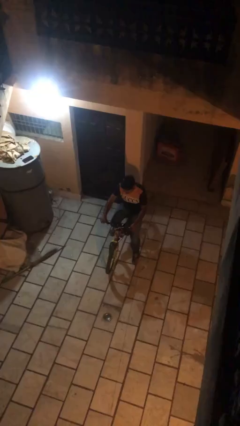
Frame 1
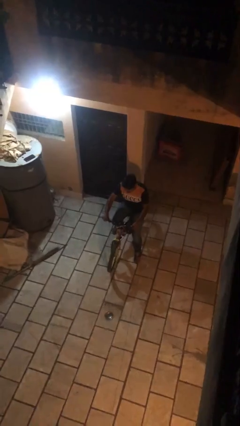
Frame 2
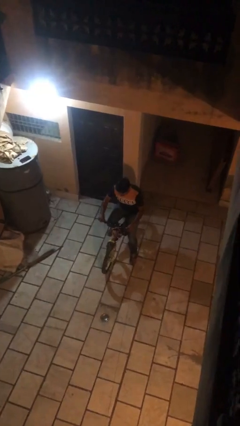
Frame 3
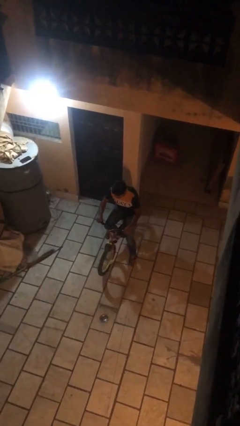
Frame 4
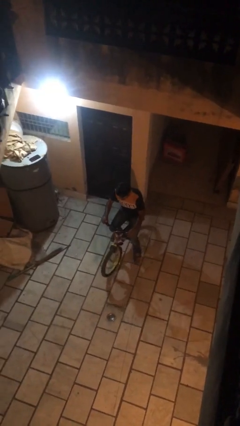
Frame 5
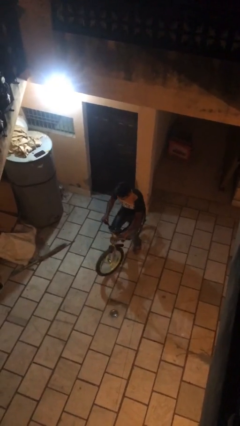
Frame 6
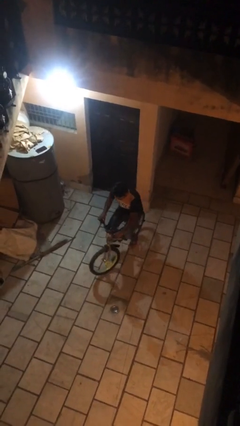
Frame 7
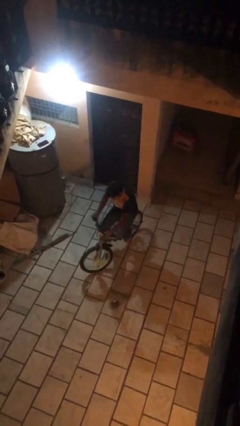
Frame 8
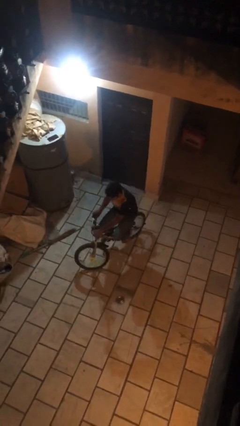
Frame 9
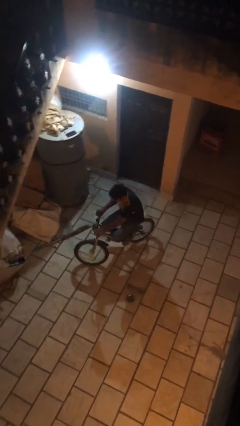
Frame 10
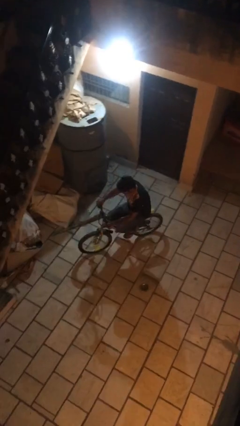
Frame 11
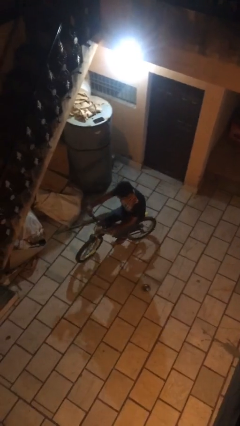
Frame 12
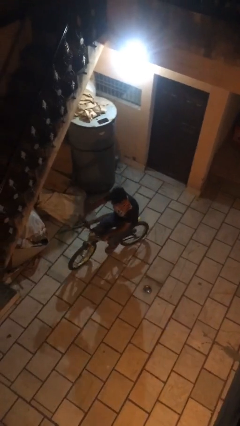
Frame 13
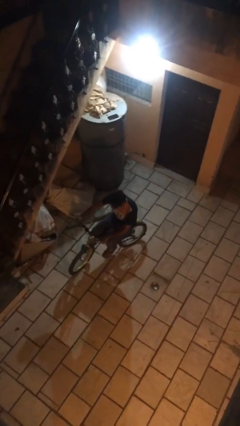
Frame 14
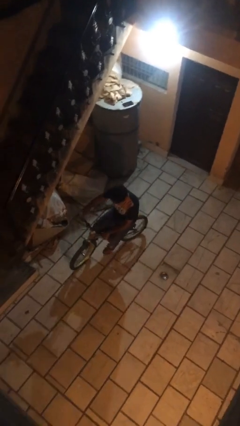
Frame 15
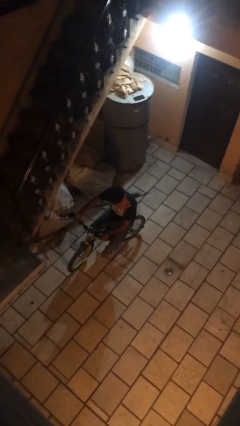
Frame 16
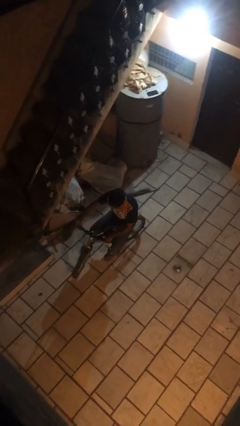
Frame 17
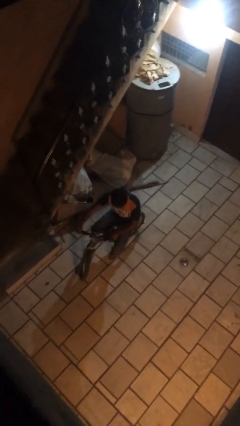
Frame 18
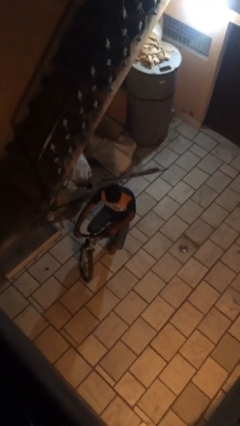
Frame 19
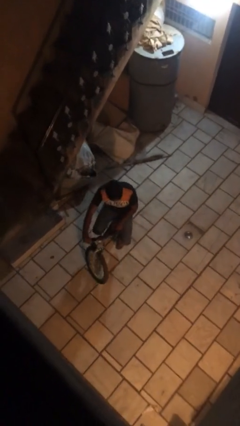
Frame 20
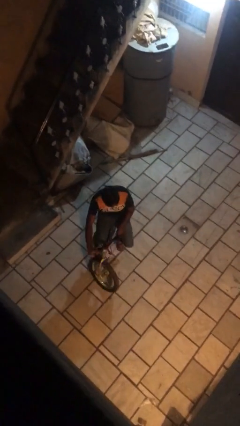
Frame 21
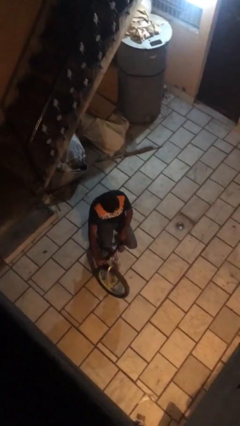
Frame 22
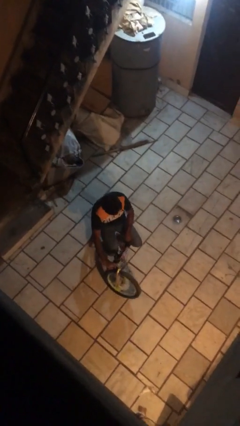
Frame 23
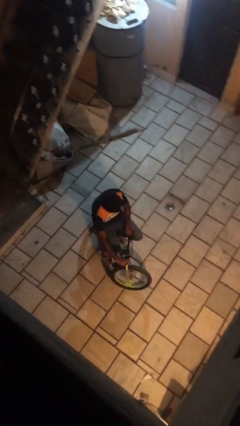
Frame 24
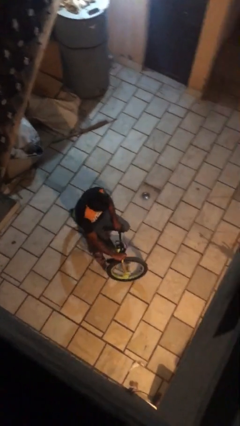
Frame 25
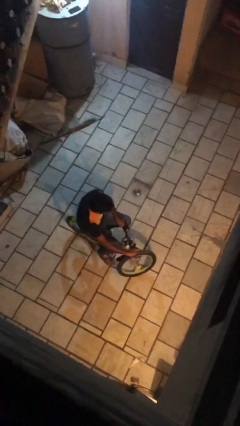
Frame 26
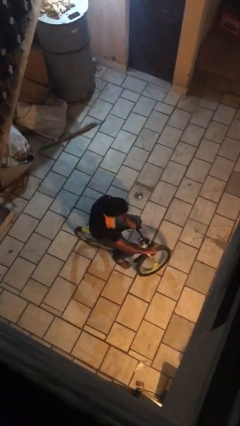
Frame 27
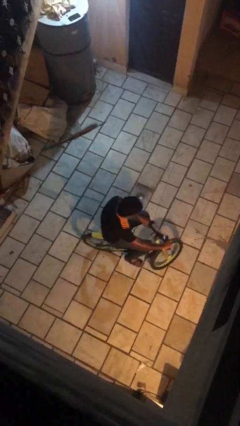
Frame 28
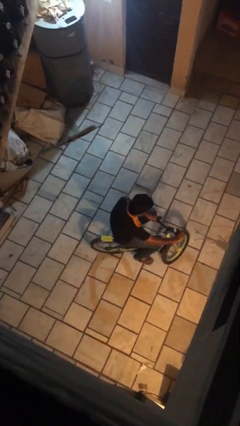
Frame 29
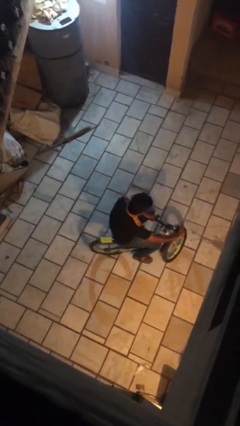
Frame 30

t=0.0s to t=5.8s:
person rides bicycle

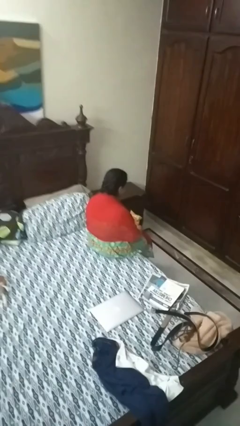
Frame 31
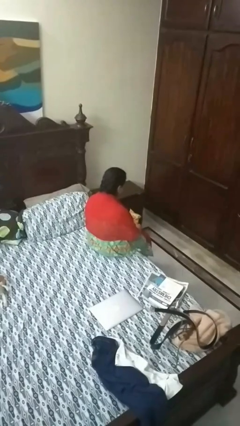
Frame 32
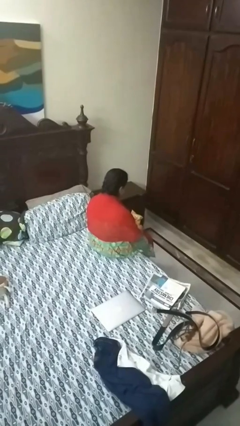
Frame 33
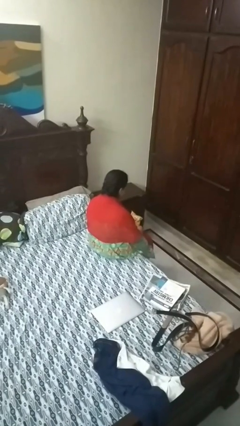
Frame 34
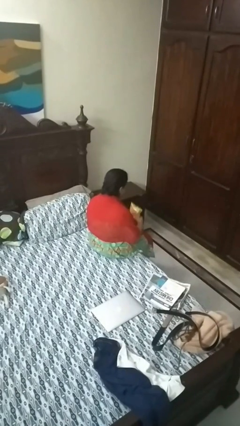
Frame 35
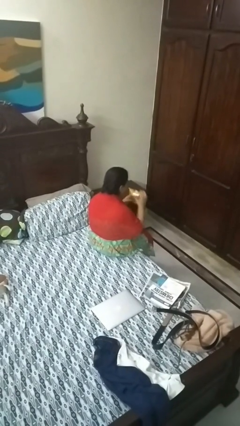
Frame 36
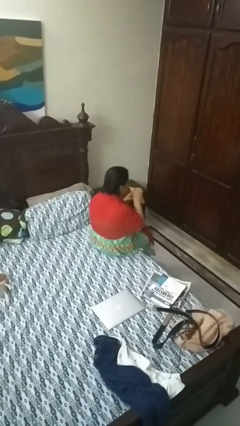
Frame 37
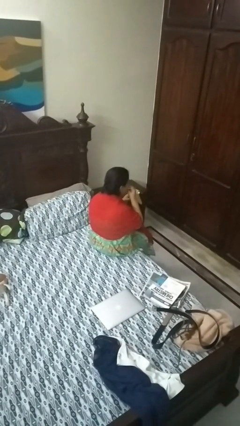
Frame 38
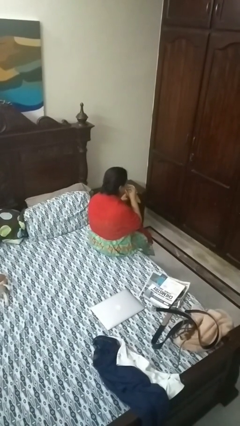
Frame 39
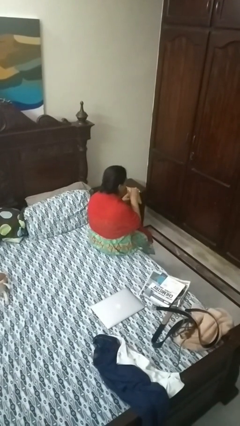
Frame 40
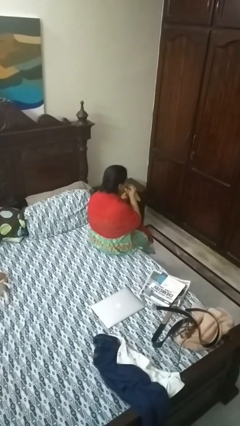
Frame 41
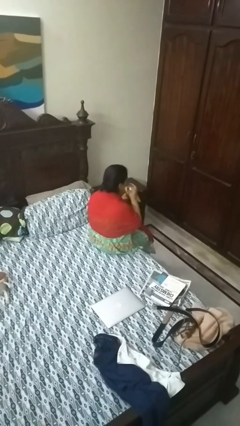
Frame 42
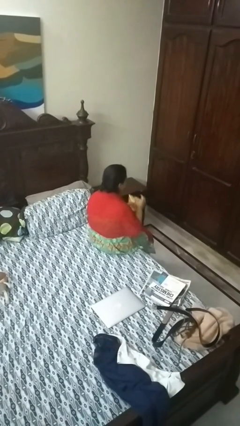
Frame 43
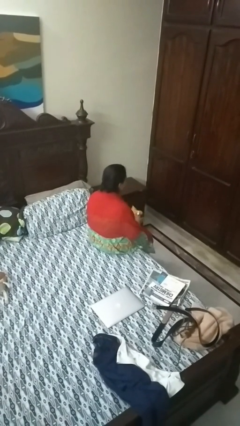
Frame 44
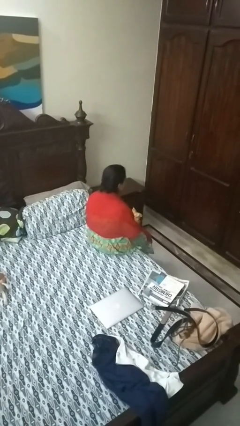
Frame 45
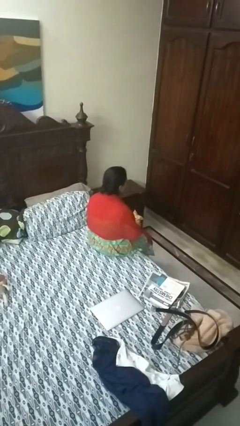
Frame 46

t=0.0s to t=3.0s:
person eats snack from bag

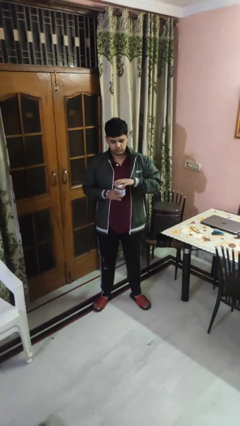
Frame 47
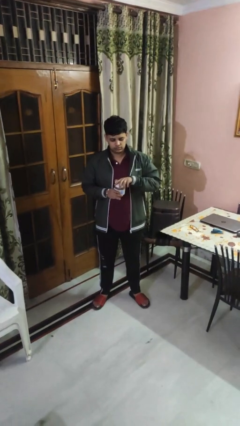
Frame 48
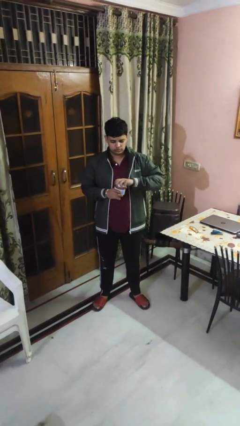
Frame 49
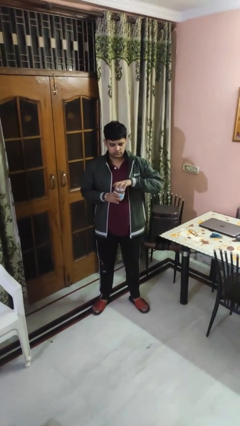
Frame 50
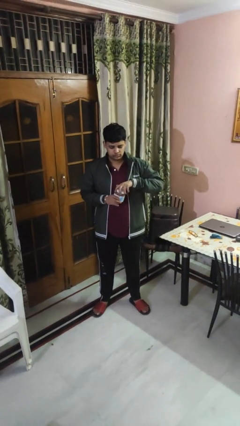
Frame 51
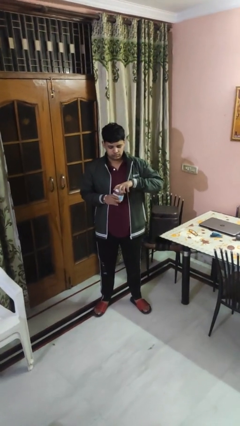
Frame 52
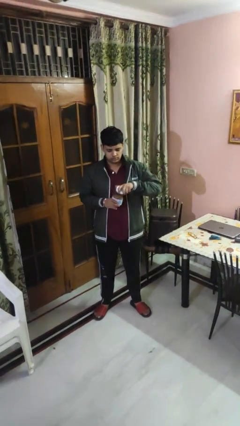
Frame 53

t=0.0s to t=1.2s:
person opens jar

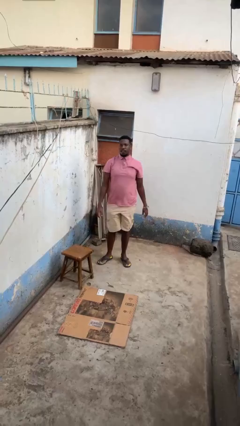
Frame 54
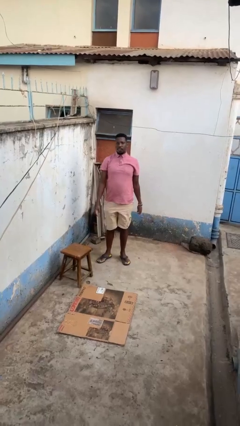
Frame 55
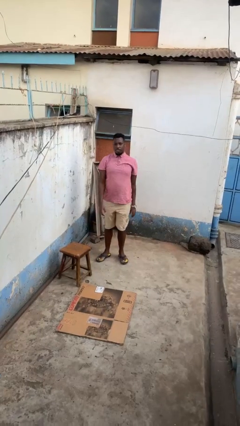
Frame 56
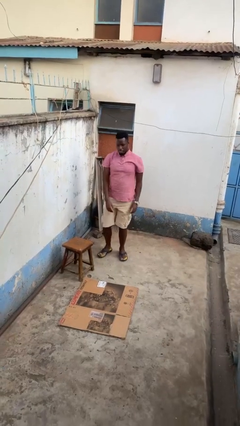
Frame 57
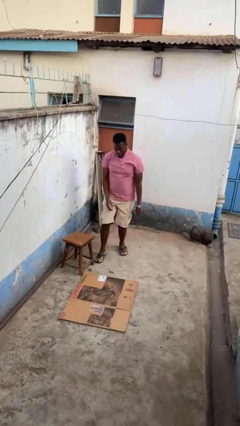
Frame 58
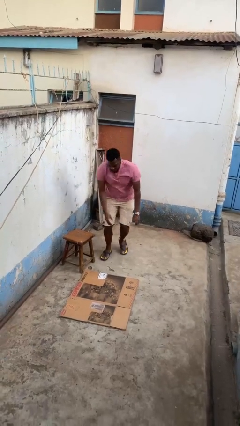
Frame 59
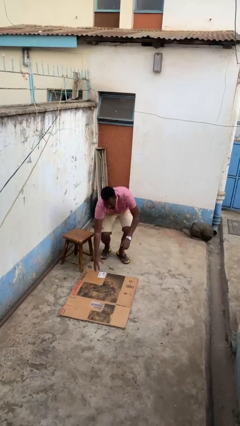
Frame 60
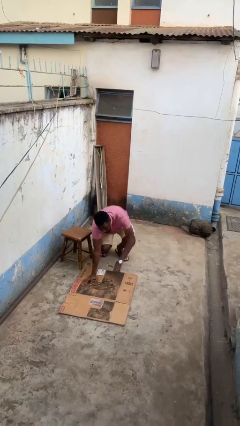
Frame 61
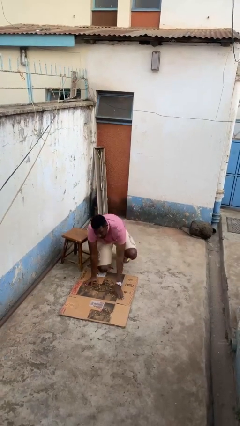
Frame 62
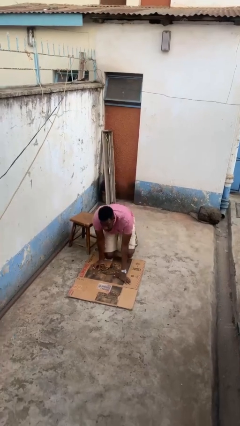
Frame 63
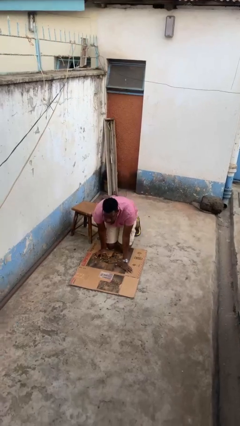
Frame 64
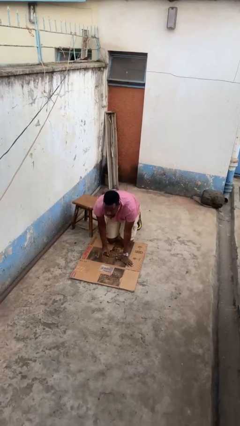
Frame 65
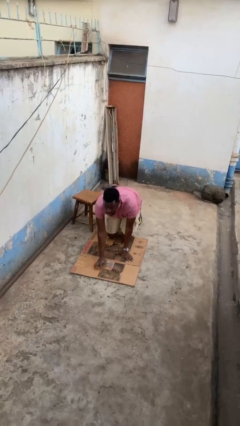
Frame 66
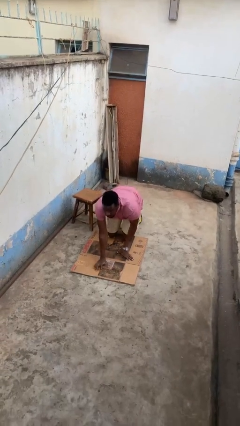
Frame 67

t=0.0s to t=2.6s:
person trips on object on floor

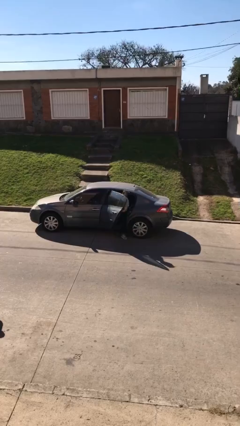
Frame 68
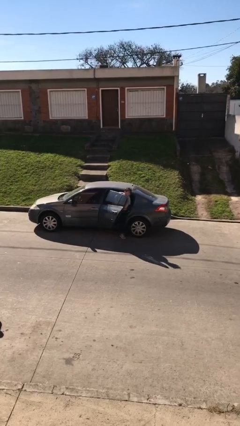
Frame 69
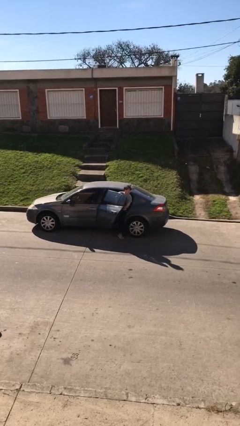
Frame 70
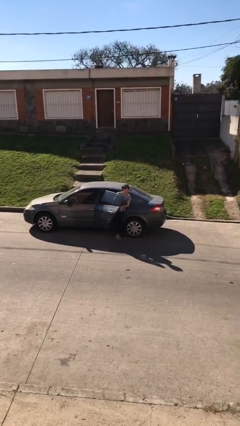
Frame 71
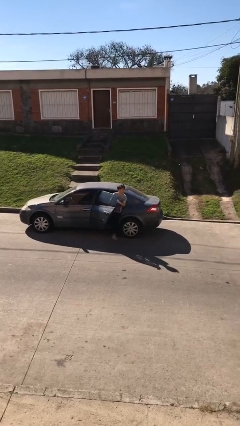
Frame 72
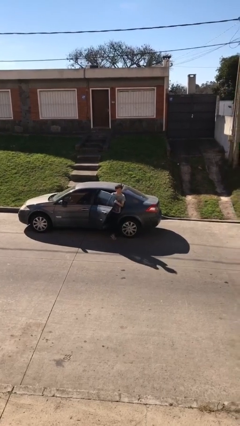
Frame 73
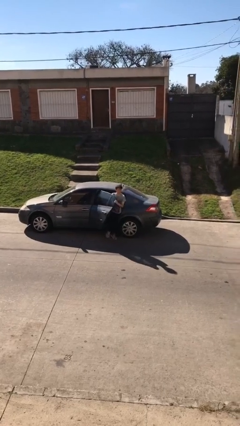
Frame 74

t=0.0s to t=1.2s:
person exits car

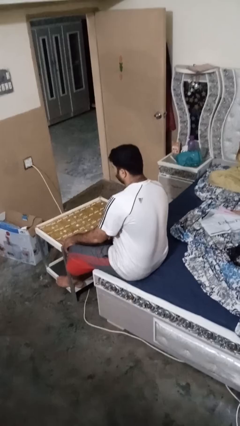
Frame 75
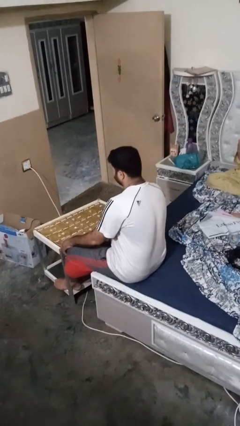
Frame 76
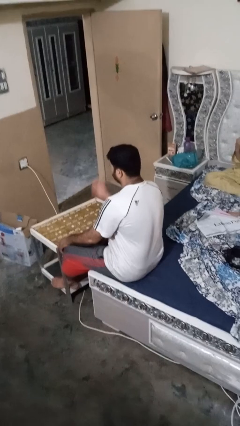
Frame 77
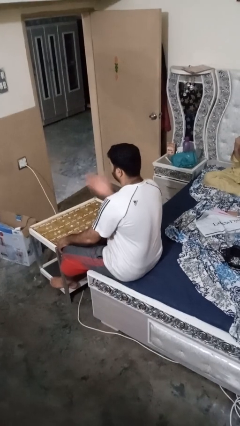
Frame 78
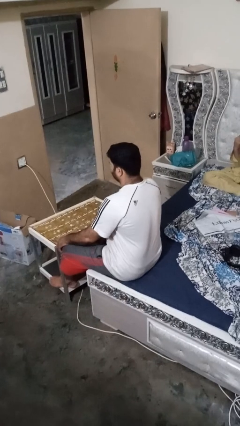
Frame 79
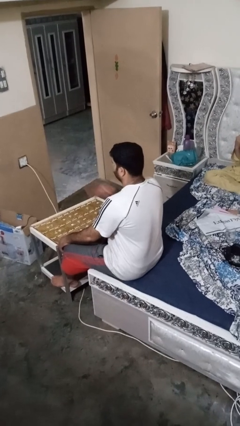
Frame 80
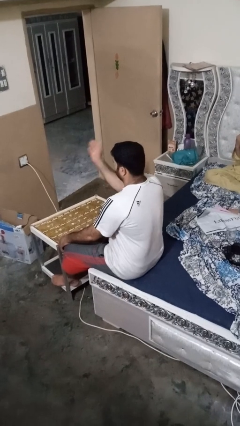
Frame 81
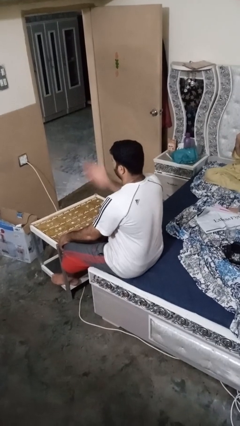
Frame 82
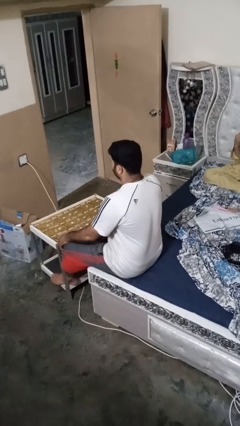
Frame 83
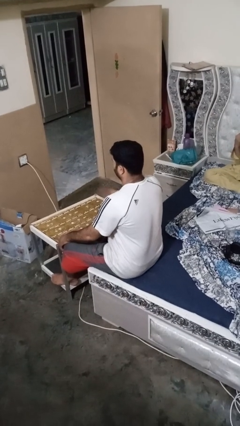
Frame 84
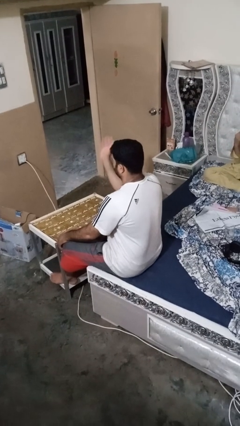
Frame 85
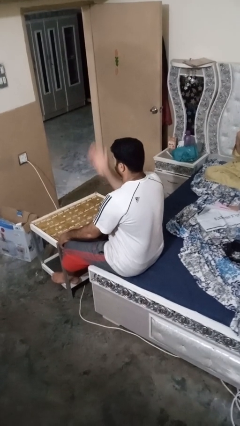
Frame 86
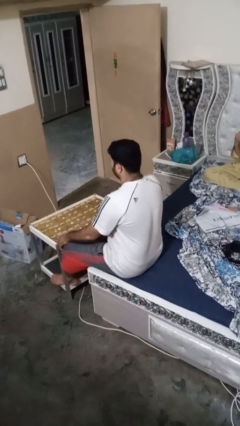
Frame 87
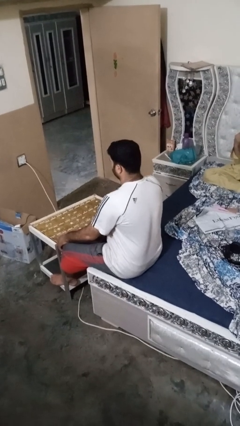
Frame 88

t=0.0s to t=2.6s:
person drums on chest

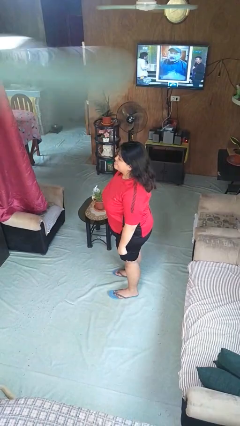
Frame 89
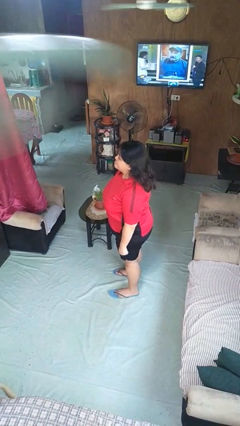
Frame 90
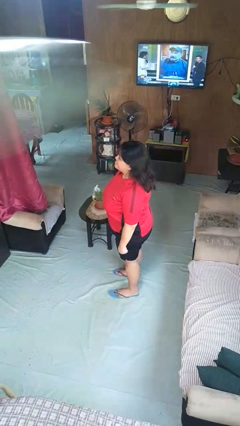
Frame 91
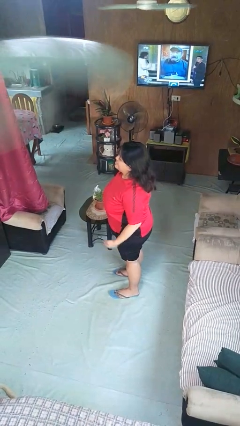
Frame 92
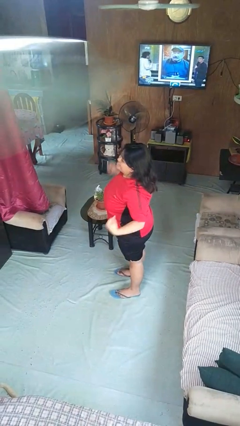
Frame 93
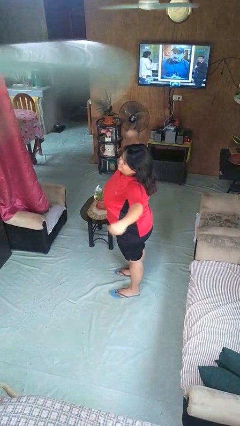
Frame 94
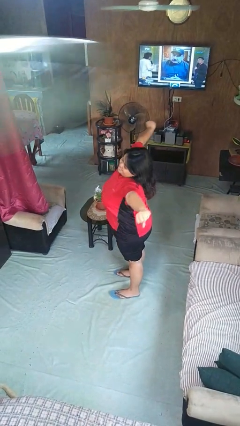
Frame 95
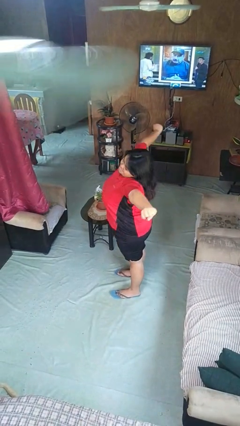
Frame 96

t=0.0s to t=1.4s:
person stretches arms to side
